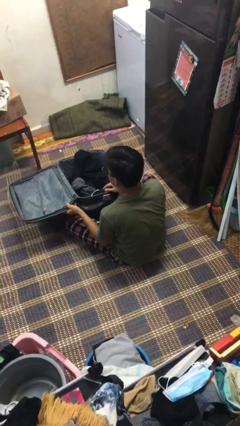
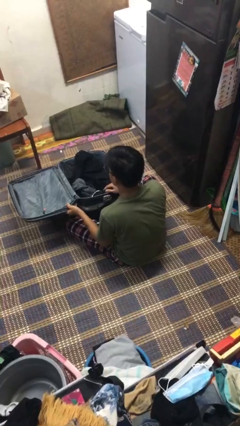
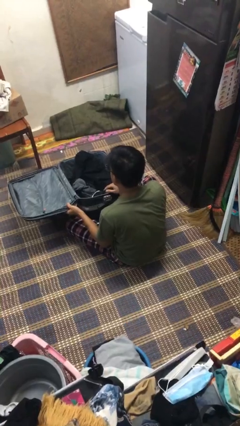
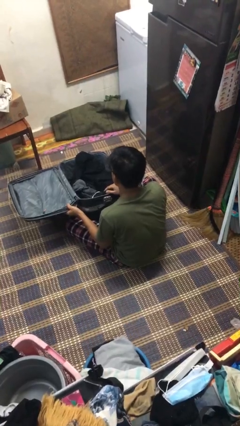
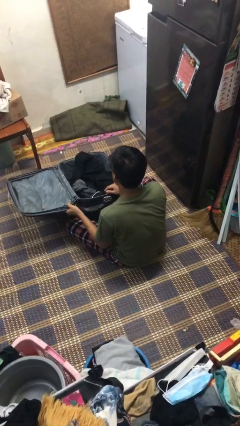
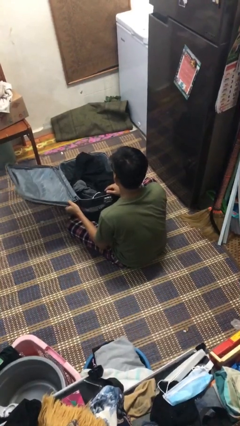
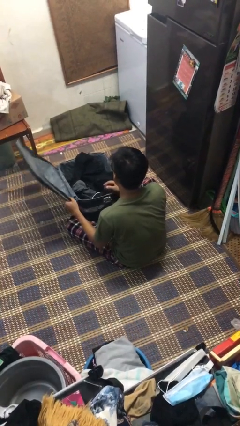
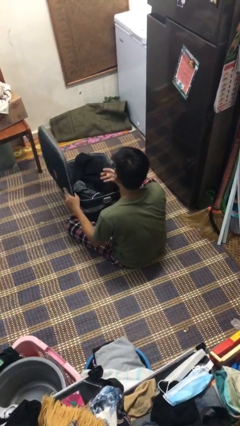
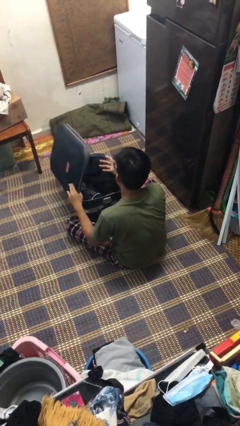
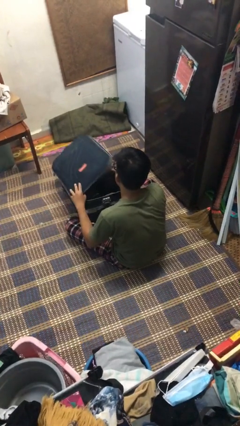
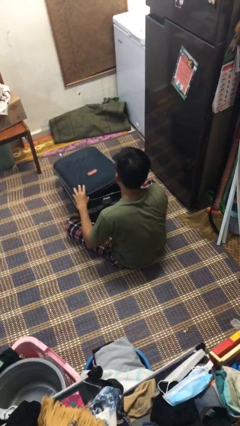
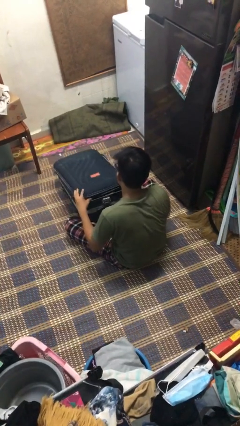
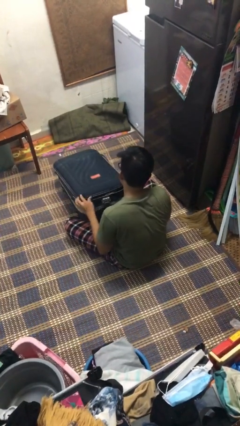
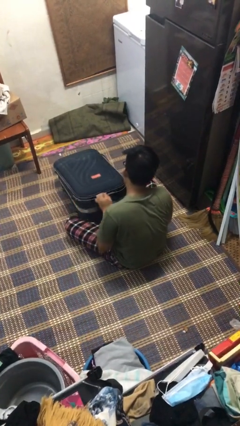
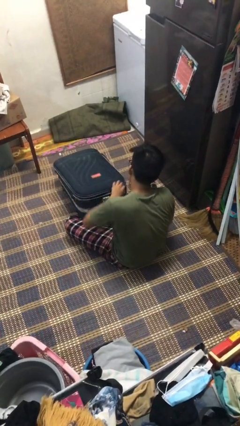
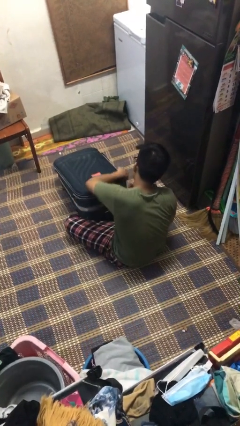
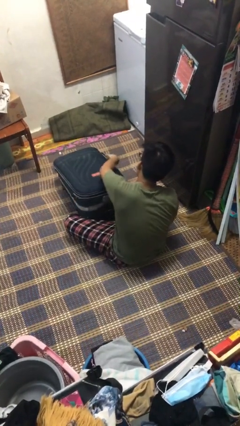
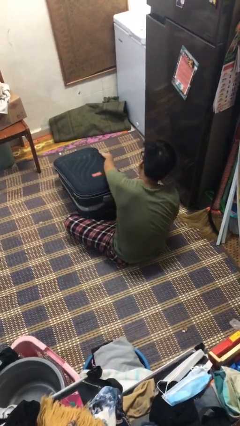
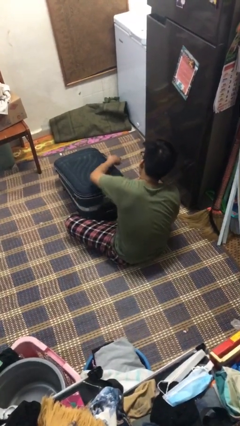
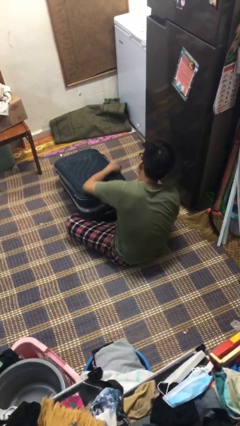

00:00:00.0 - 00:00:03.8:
person closes suitcase

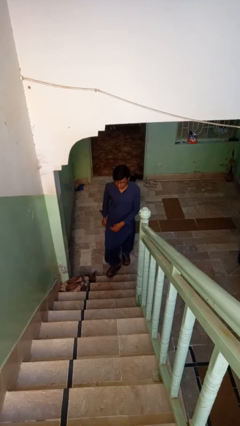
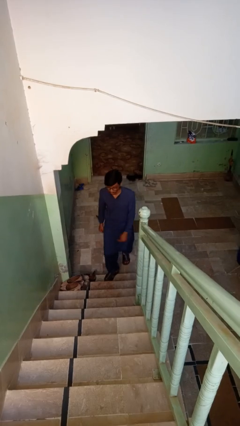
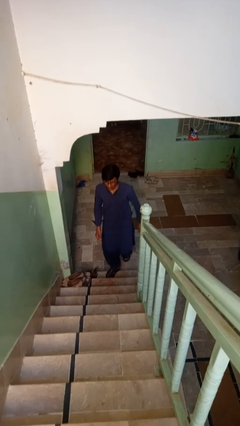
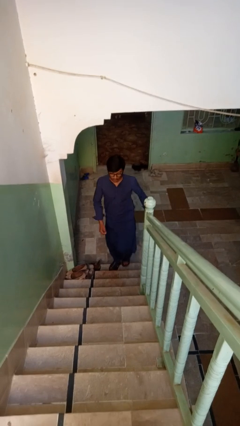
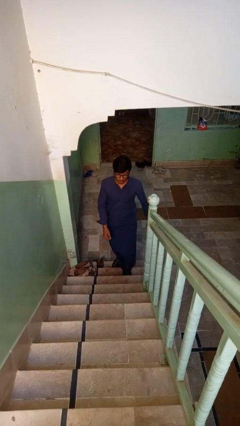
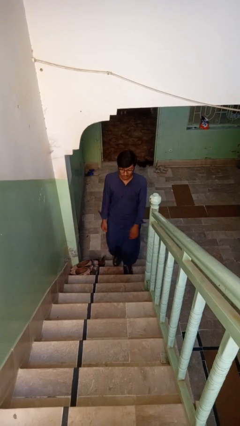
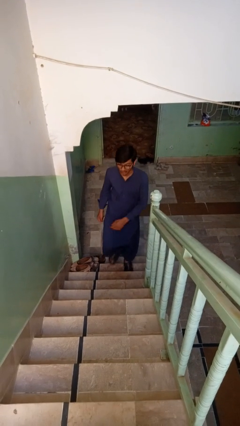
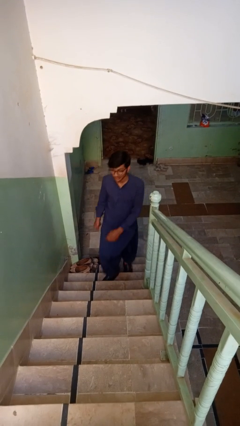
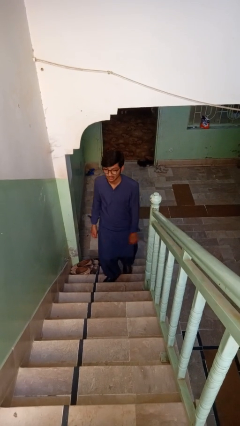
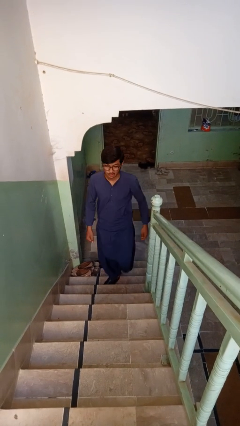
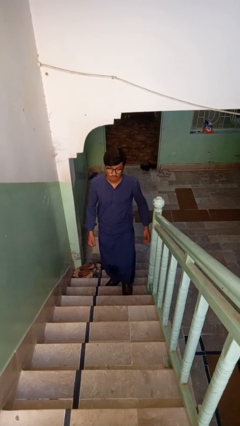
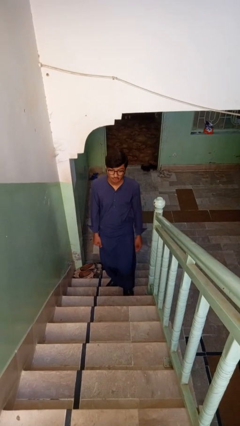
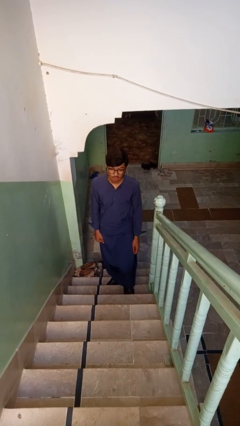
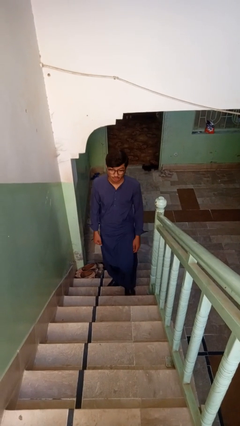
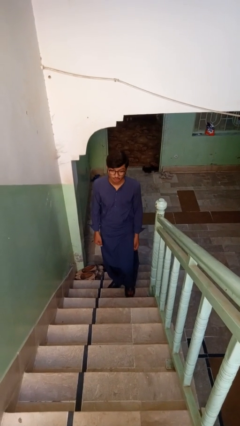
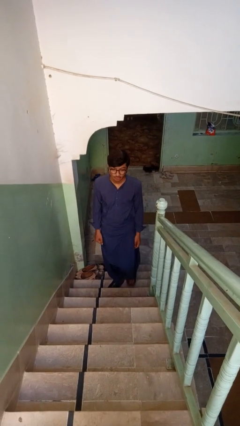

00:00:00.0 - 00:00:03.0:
person climbs up stairs

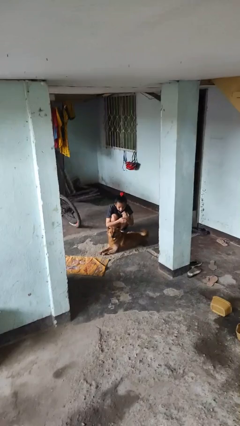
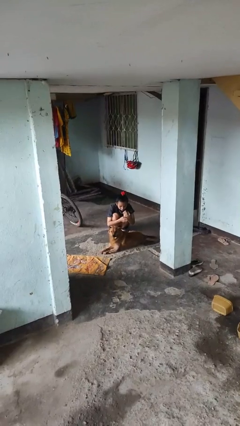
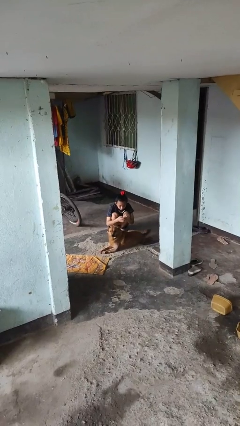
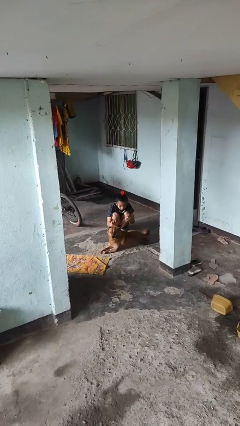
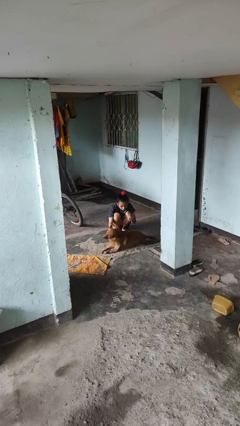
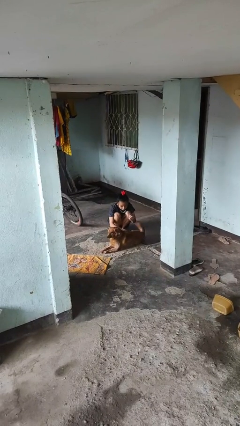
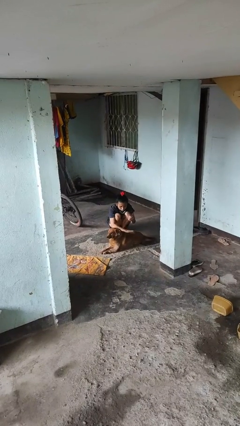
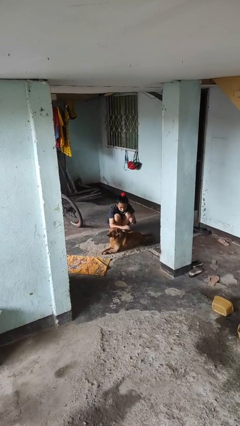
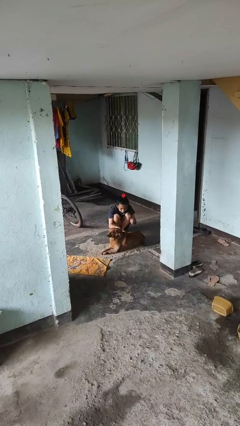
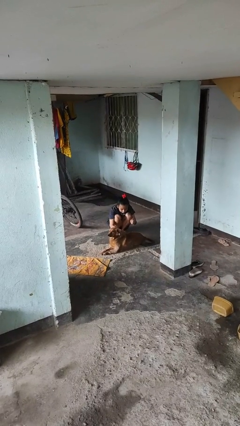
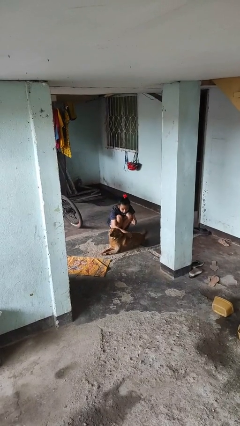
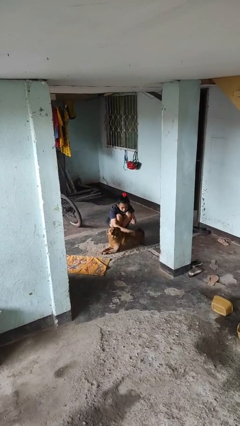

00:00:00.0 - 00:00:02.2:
person pets dog

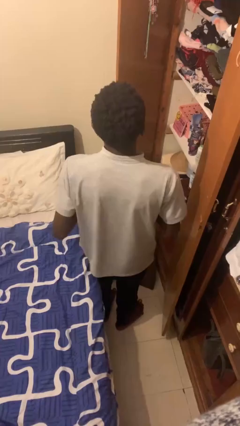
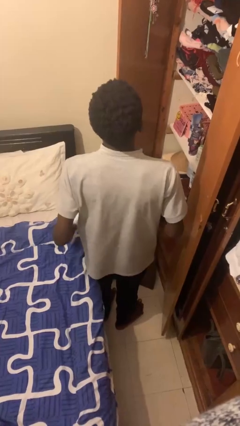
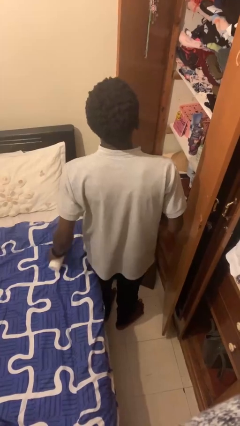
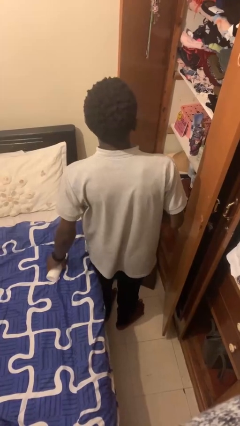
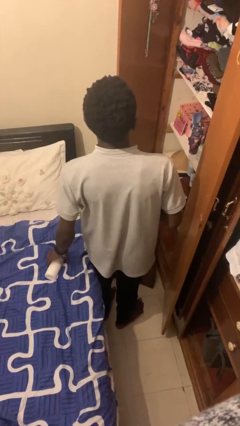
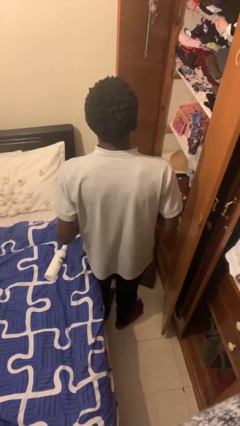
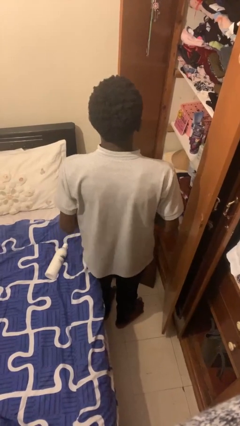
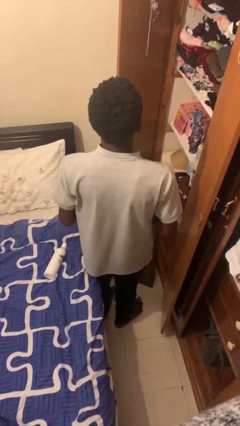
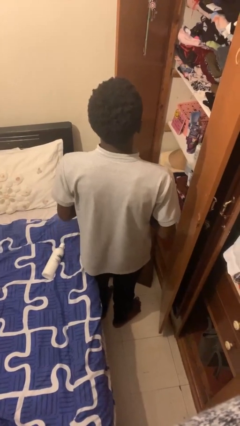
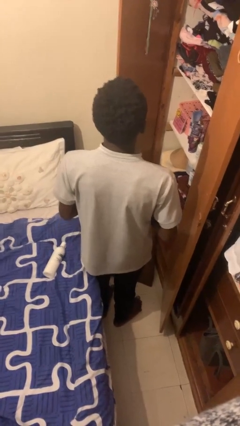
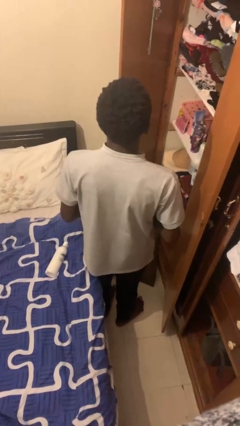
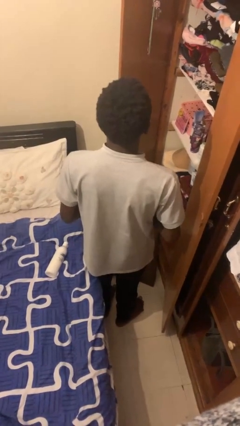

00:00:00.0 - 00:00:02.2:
person puts down object into cabinet

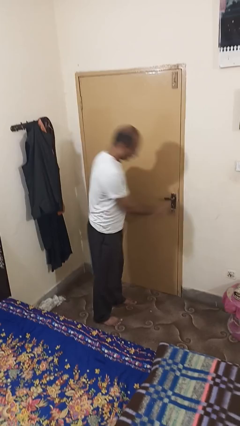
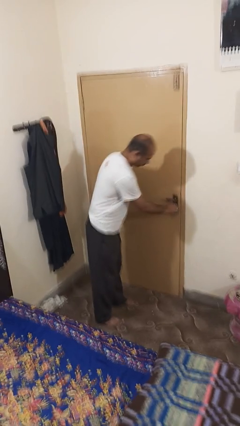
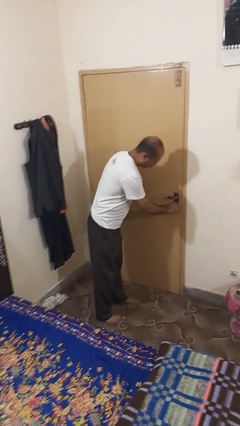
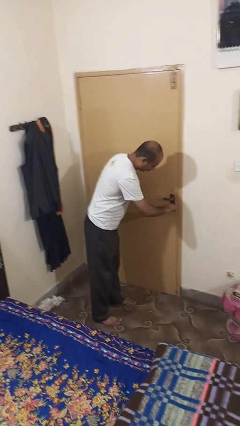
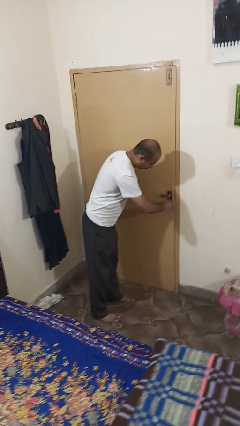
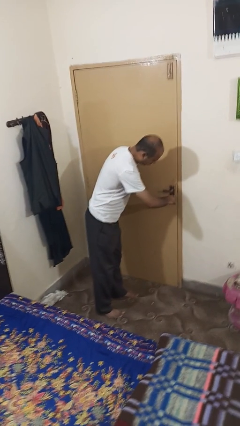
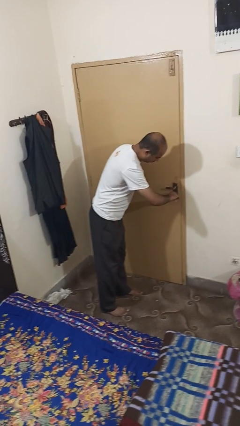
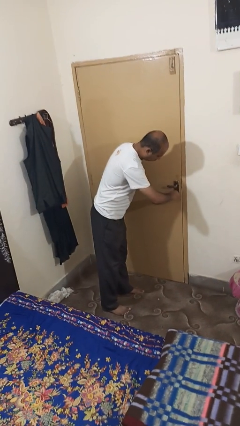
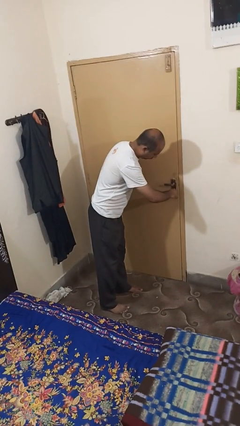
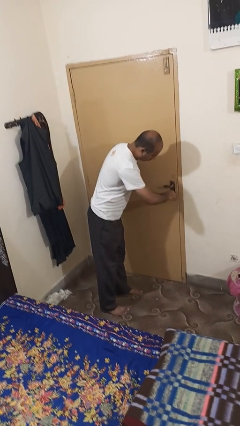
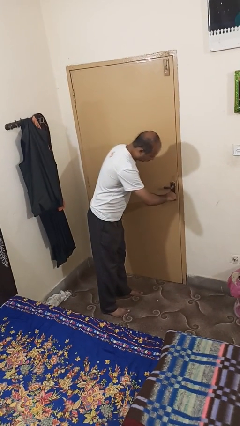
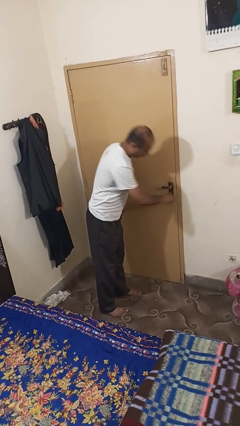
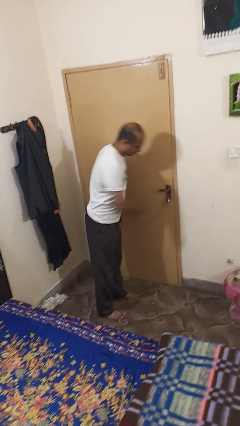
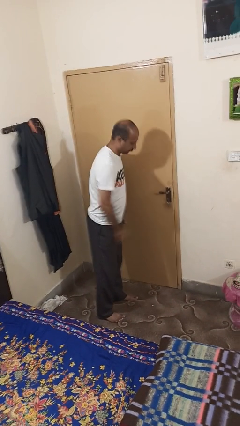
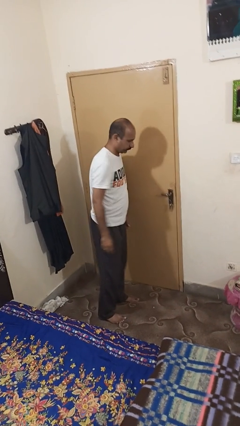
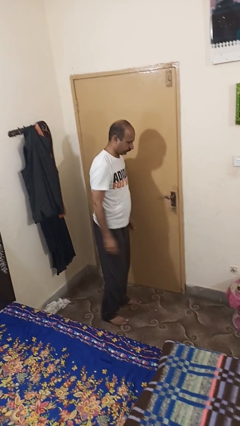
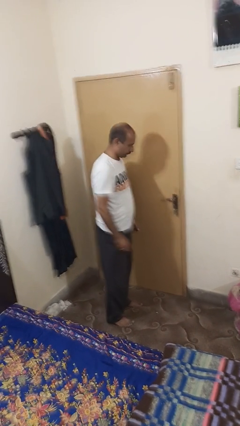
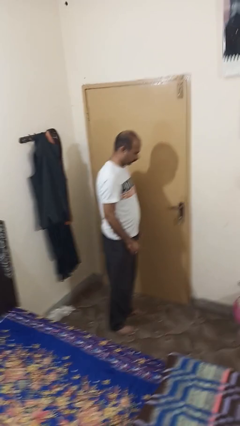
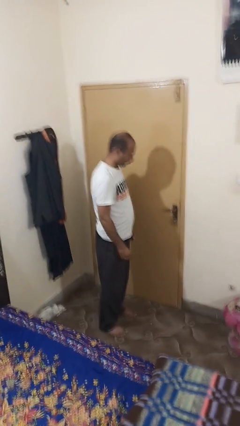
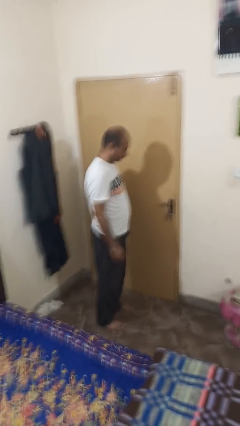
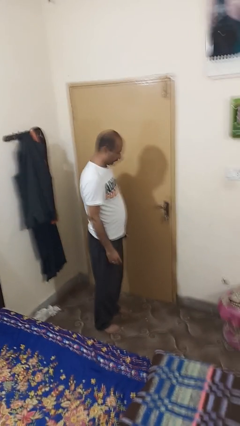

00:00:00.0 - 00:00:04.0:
person locks door with keys

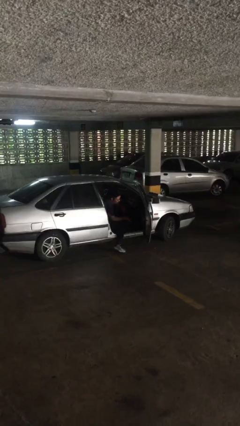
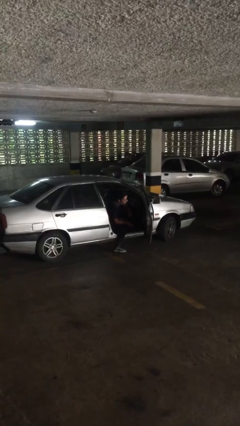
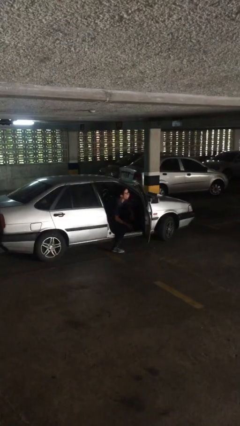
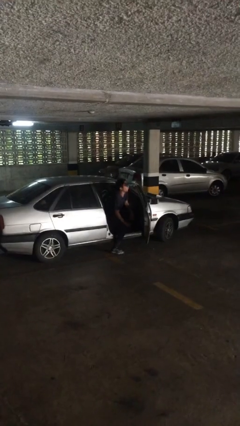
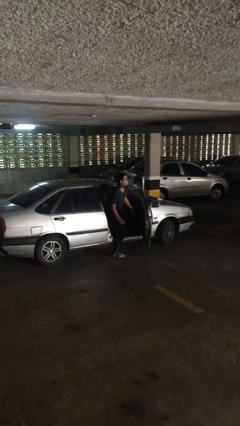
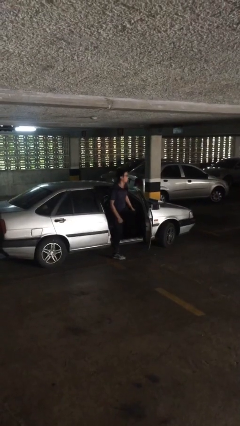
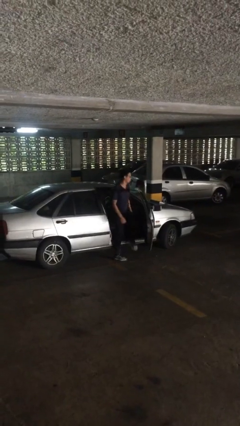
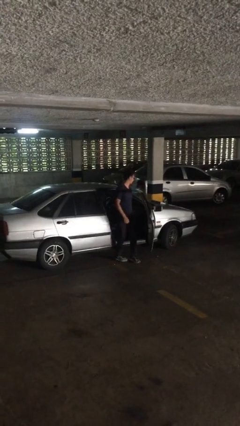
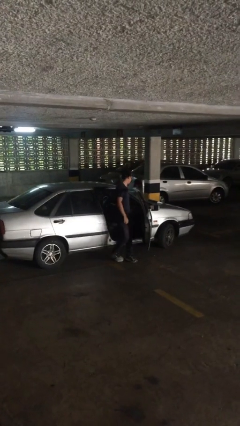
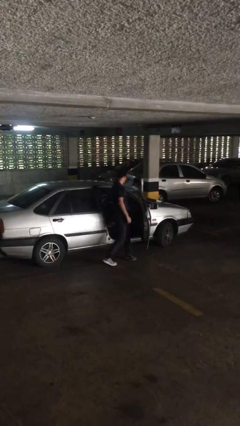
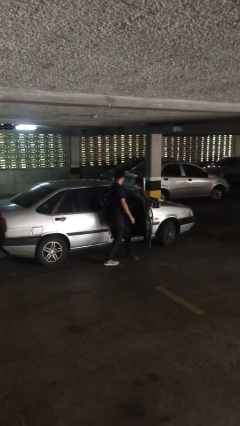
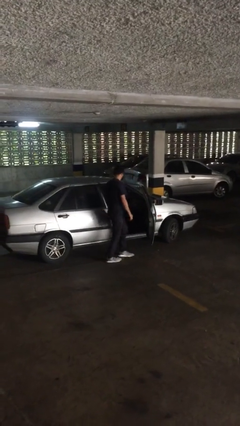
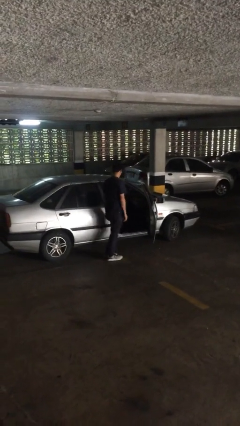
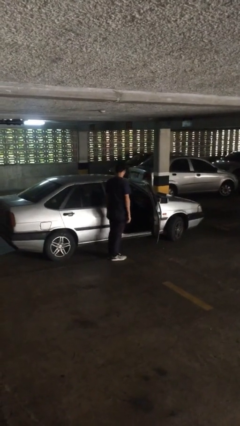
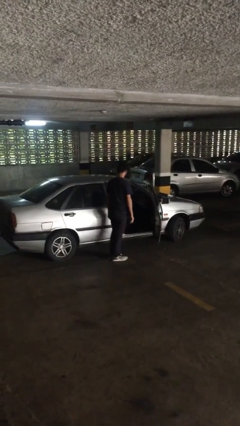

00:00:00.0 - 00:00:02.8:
person exits car
